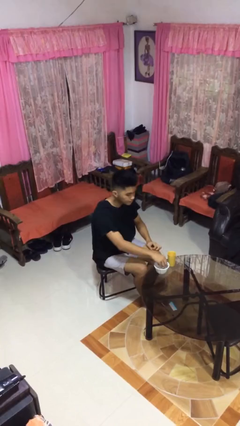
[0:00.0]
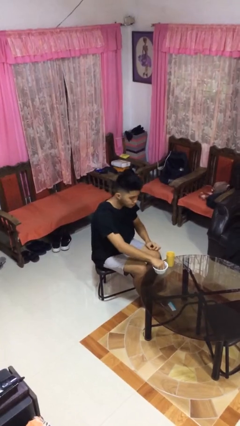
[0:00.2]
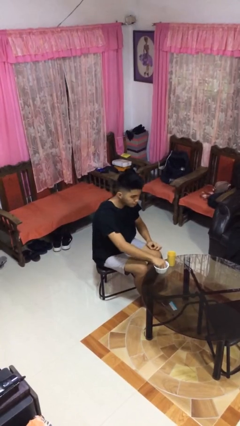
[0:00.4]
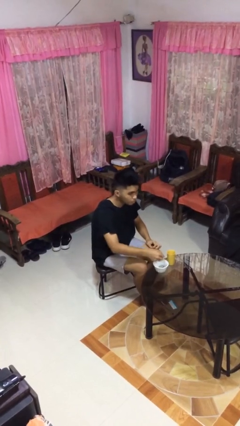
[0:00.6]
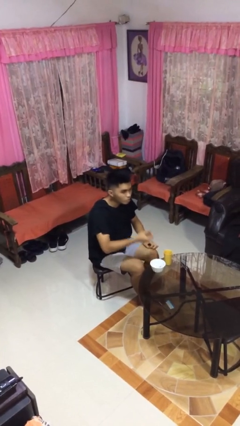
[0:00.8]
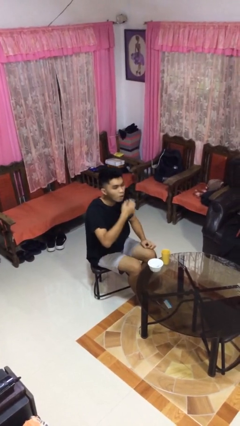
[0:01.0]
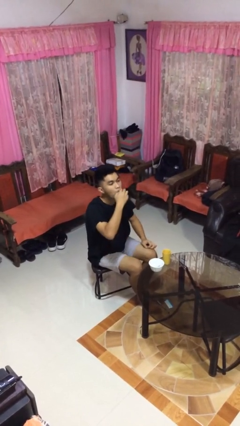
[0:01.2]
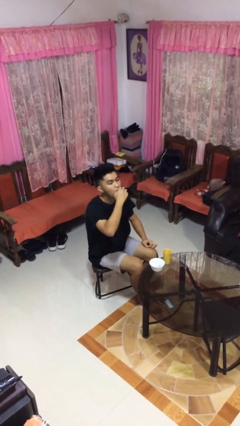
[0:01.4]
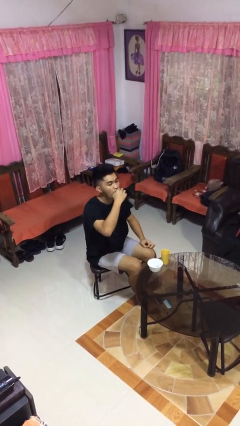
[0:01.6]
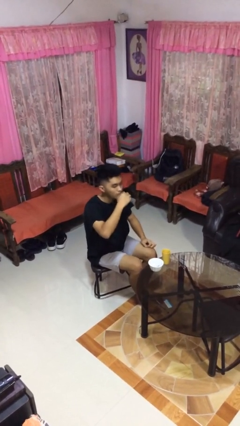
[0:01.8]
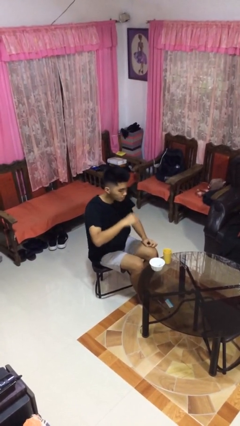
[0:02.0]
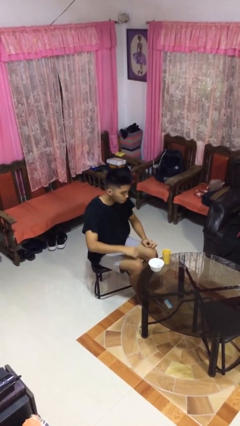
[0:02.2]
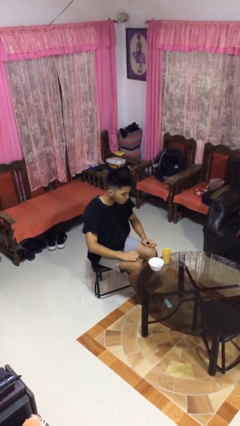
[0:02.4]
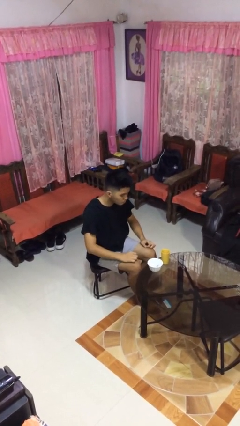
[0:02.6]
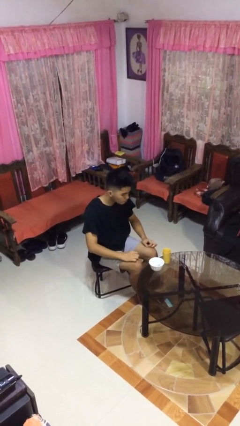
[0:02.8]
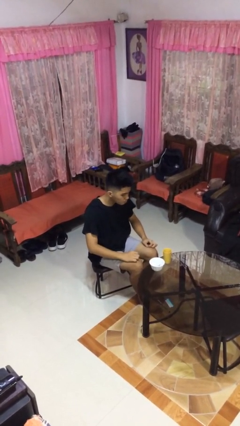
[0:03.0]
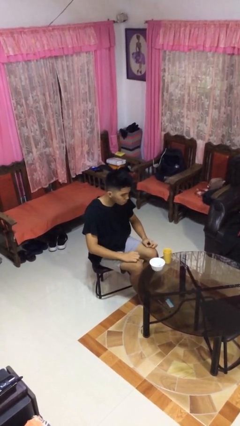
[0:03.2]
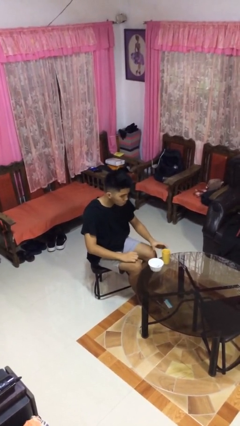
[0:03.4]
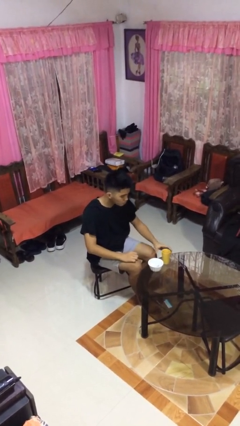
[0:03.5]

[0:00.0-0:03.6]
person takes medicine pills

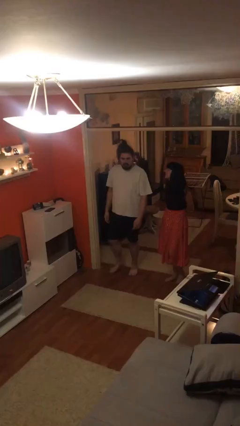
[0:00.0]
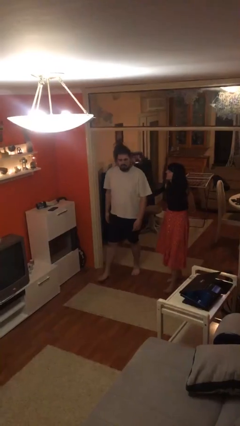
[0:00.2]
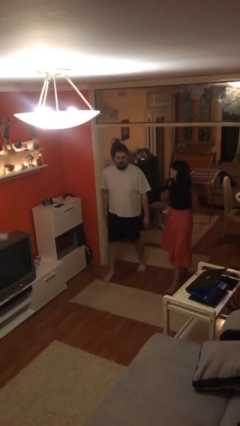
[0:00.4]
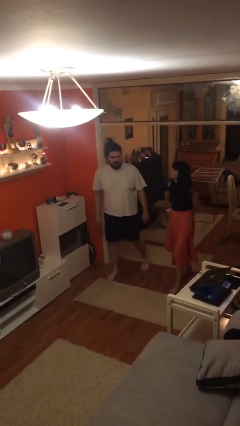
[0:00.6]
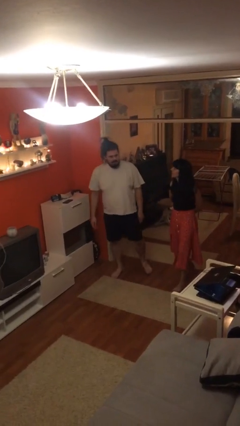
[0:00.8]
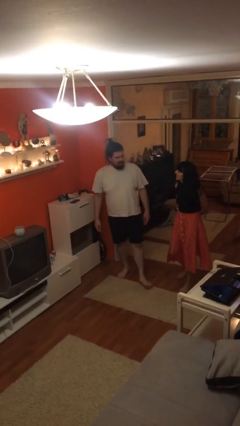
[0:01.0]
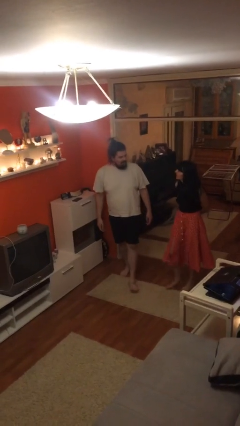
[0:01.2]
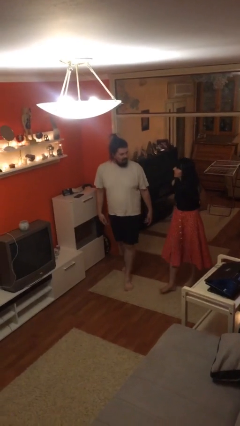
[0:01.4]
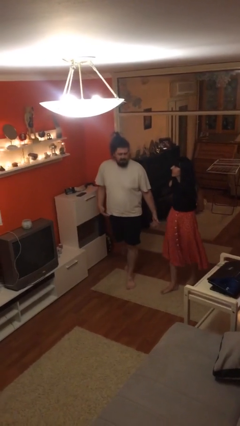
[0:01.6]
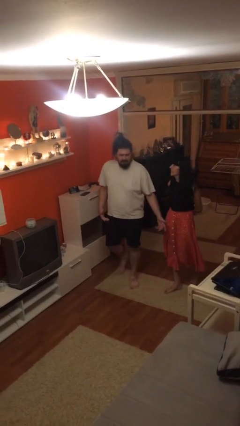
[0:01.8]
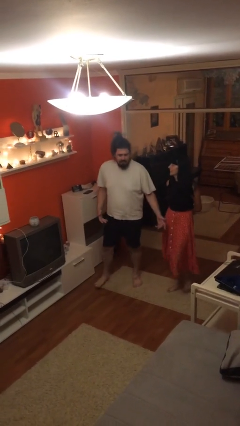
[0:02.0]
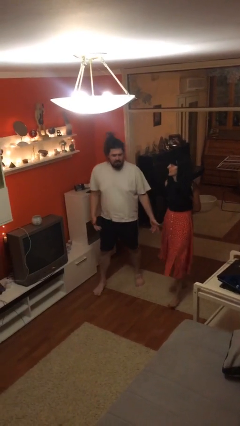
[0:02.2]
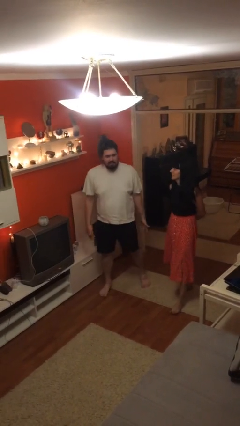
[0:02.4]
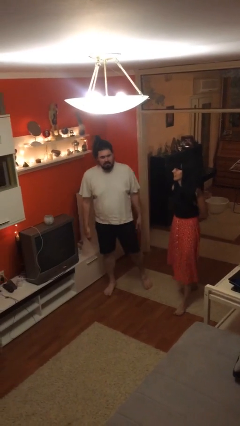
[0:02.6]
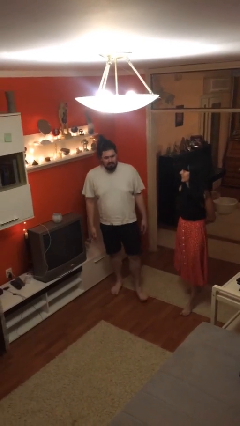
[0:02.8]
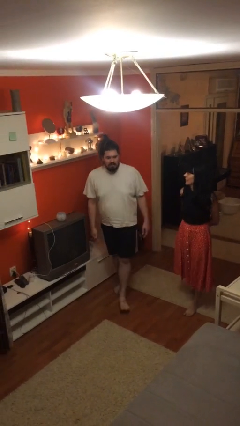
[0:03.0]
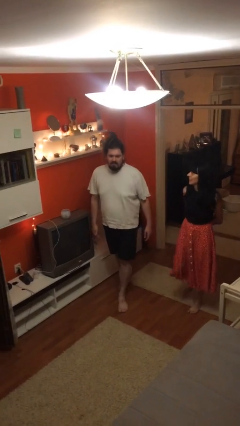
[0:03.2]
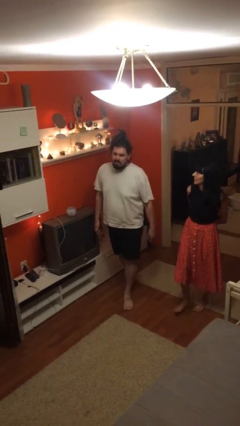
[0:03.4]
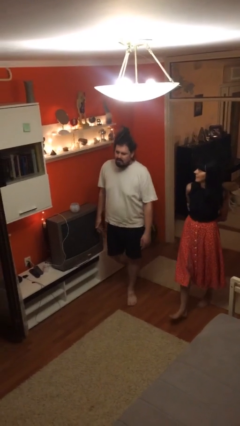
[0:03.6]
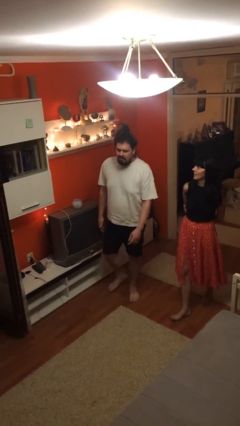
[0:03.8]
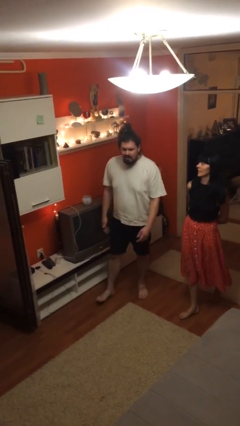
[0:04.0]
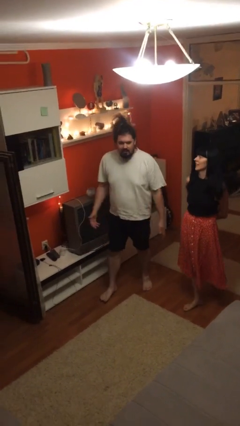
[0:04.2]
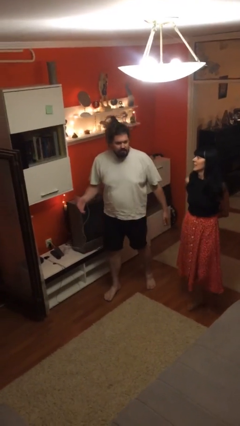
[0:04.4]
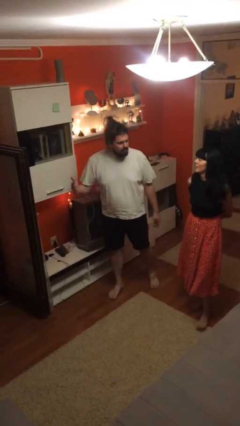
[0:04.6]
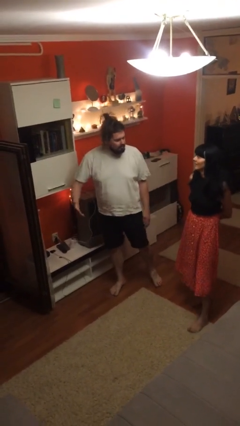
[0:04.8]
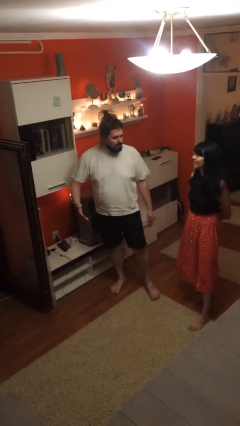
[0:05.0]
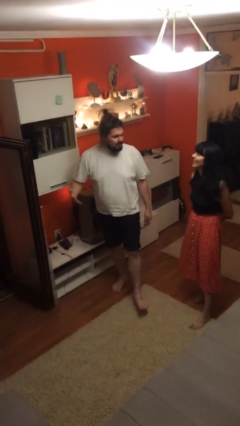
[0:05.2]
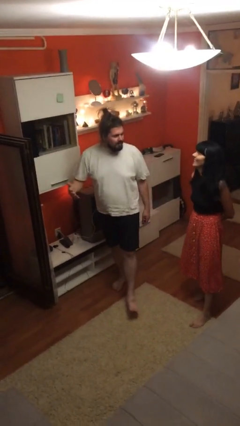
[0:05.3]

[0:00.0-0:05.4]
person talks to person

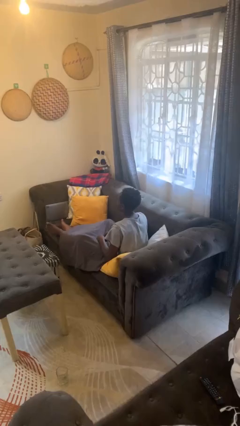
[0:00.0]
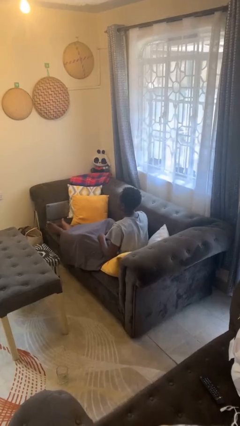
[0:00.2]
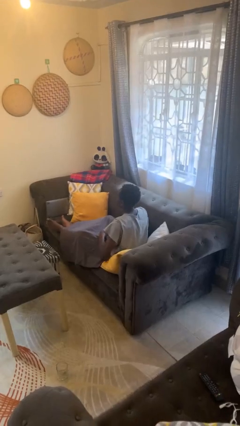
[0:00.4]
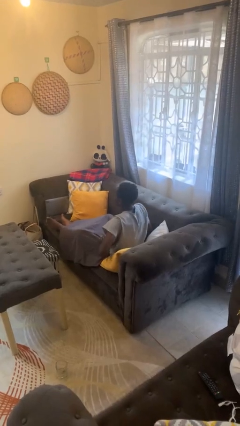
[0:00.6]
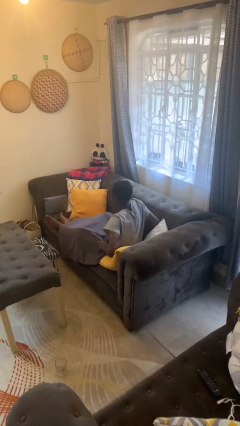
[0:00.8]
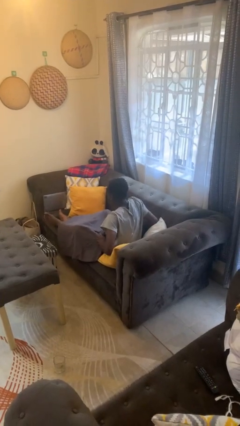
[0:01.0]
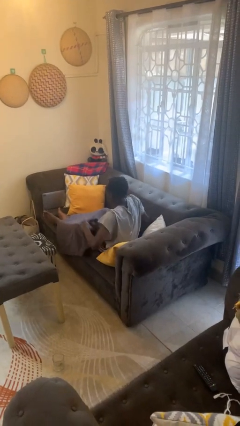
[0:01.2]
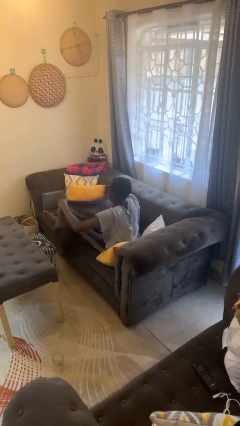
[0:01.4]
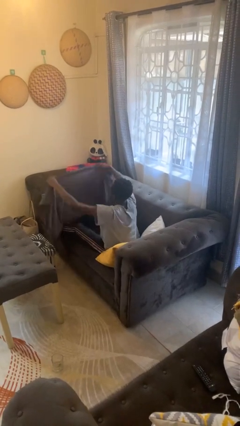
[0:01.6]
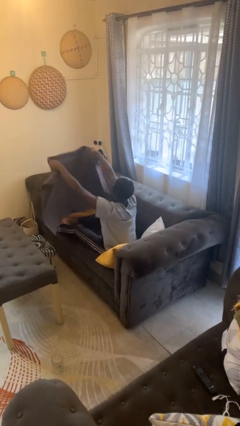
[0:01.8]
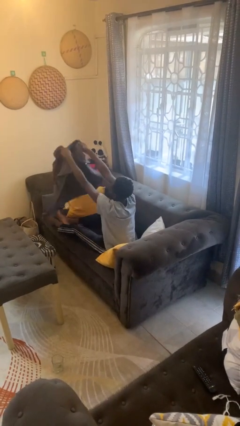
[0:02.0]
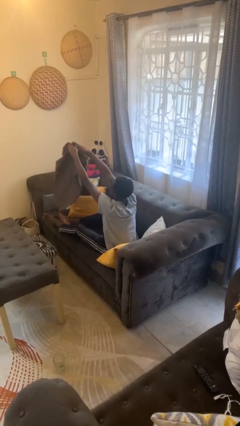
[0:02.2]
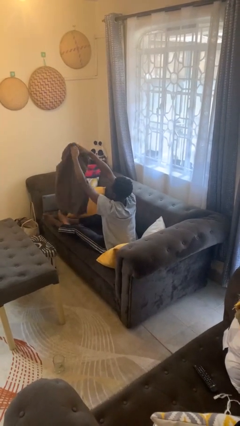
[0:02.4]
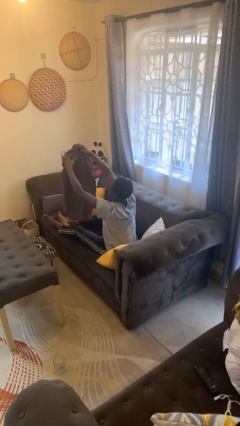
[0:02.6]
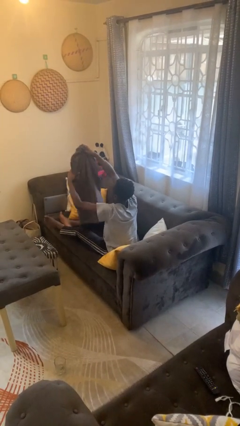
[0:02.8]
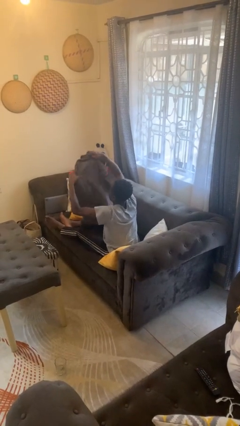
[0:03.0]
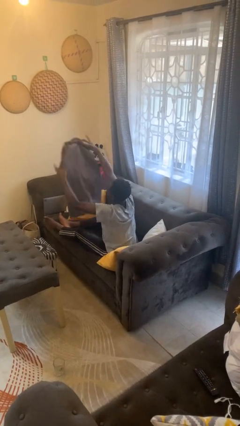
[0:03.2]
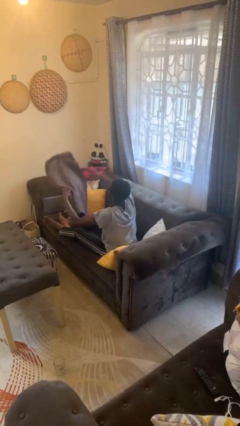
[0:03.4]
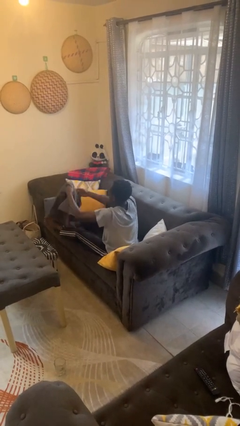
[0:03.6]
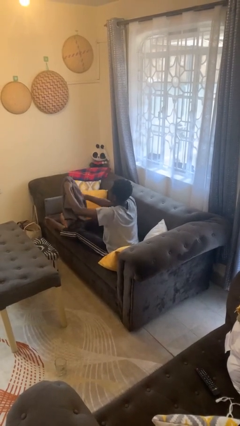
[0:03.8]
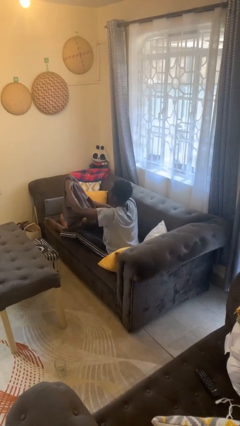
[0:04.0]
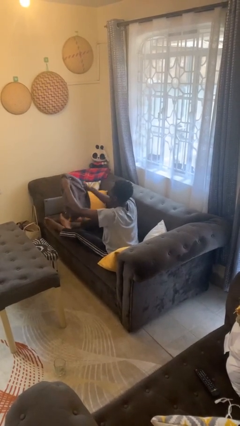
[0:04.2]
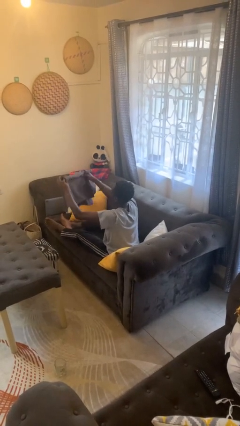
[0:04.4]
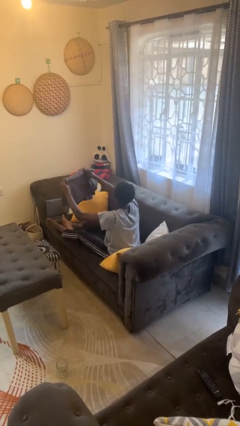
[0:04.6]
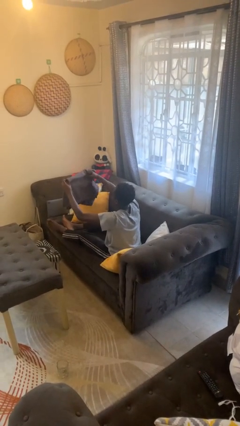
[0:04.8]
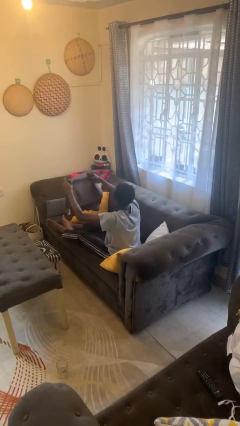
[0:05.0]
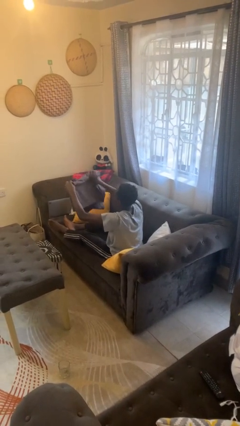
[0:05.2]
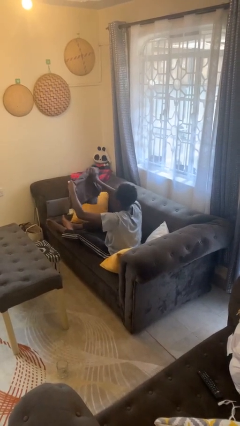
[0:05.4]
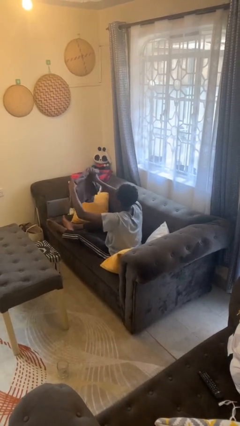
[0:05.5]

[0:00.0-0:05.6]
person folds blanket

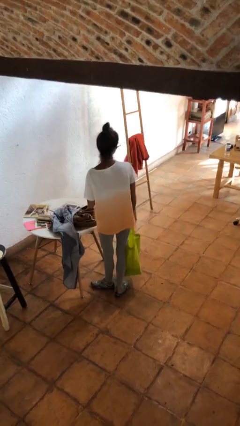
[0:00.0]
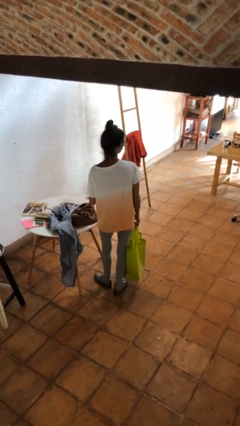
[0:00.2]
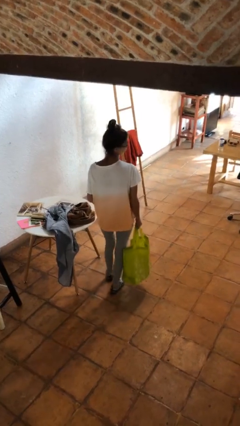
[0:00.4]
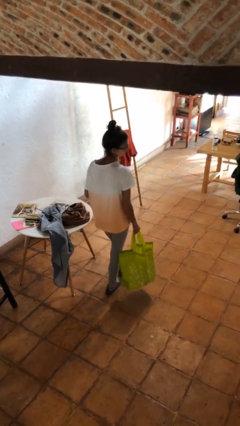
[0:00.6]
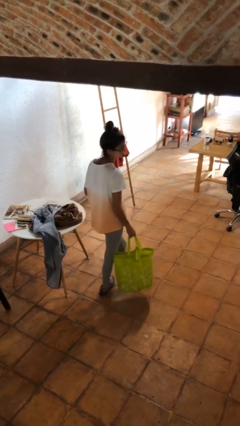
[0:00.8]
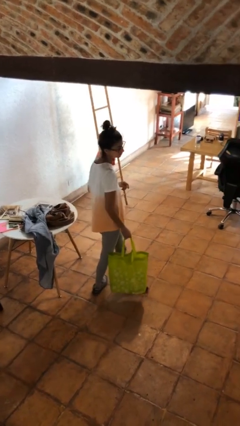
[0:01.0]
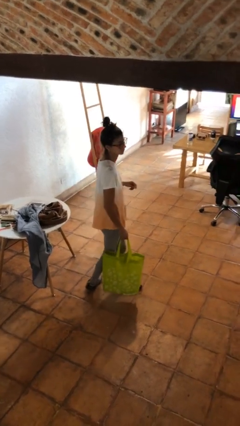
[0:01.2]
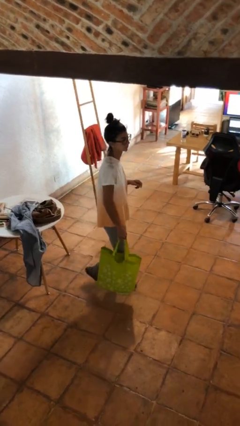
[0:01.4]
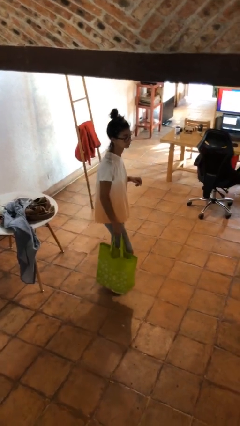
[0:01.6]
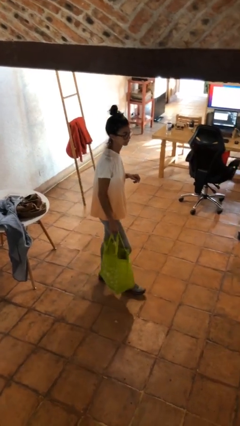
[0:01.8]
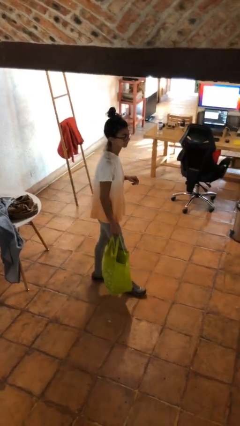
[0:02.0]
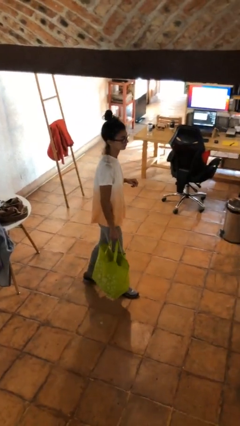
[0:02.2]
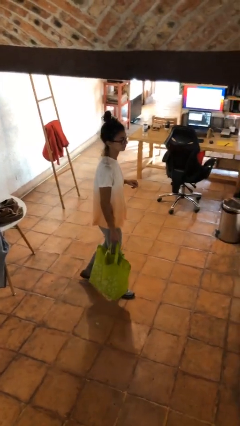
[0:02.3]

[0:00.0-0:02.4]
person carries groceries

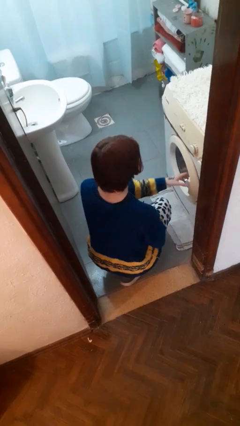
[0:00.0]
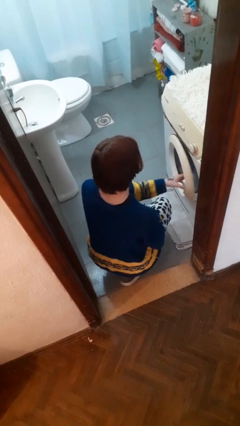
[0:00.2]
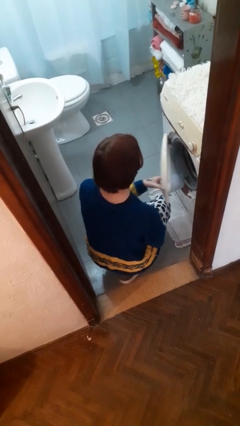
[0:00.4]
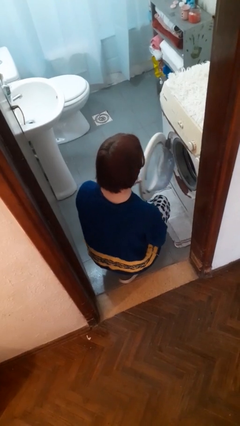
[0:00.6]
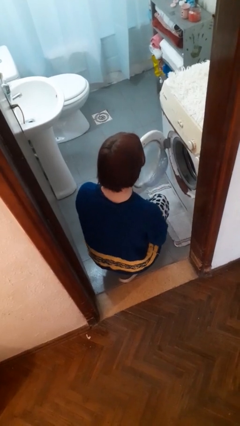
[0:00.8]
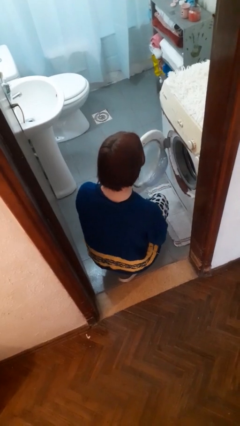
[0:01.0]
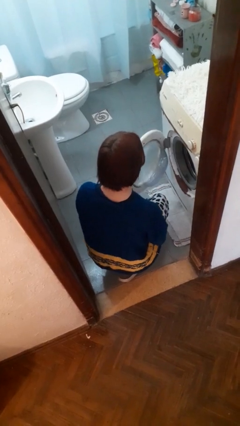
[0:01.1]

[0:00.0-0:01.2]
person opens clothes washer
